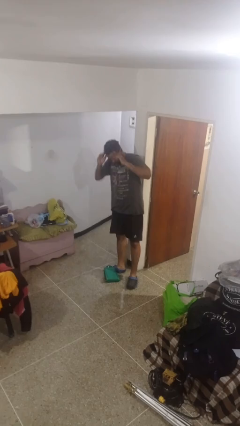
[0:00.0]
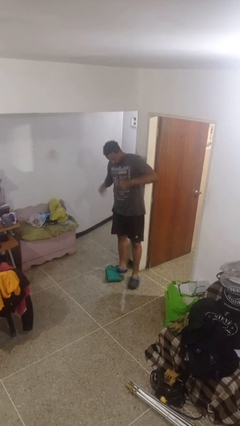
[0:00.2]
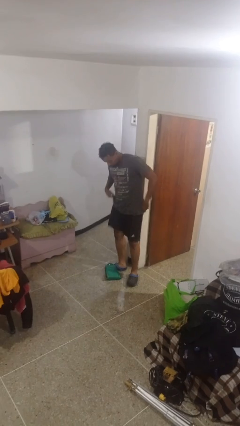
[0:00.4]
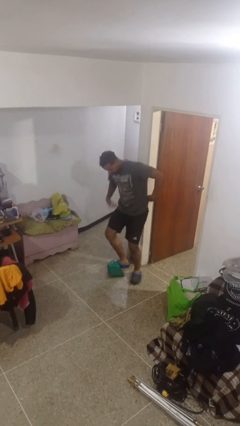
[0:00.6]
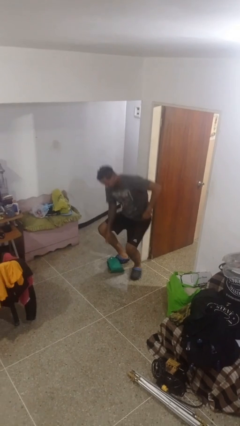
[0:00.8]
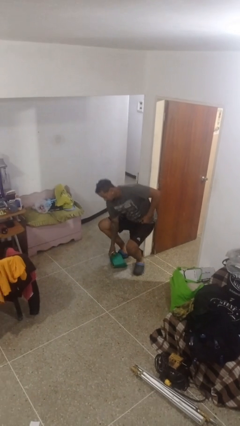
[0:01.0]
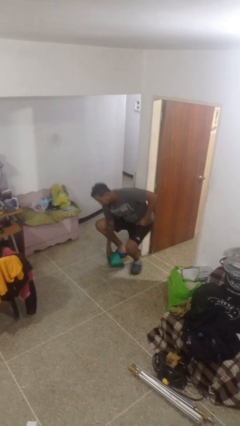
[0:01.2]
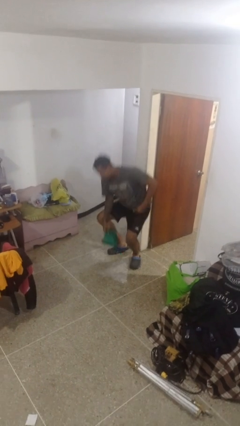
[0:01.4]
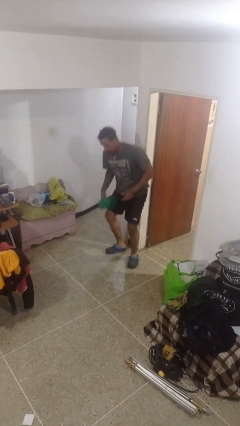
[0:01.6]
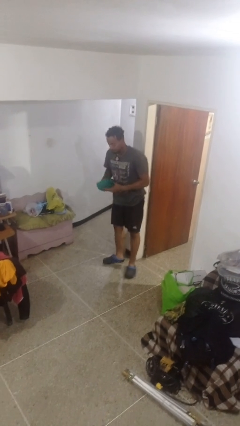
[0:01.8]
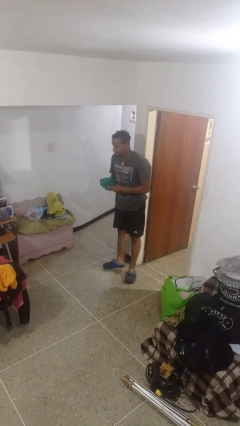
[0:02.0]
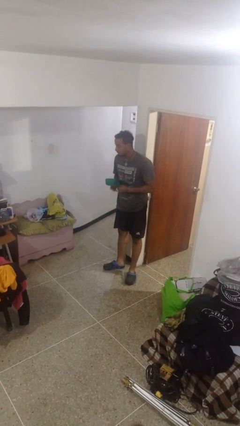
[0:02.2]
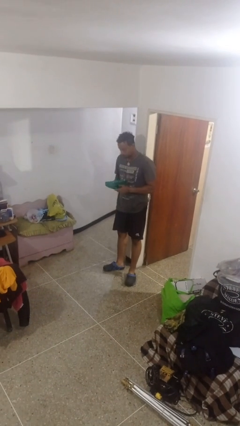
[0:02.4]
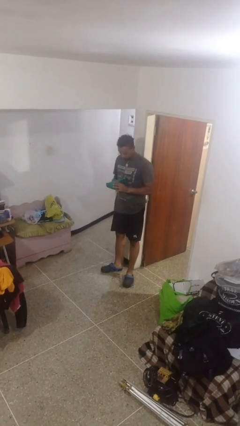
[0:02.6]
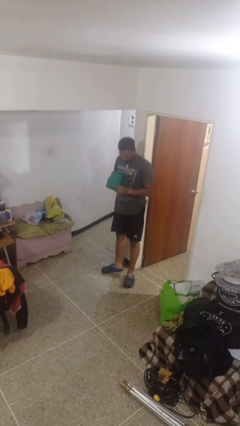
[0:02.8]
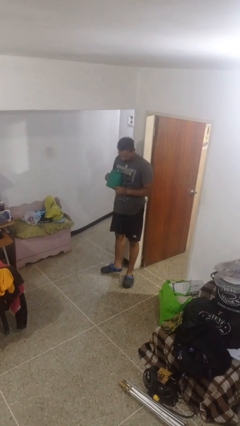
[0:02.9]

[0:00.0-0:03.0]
person picks up object from floor

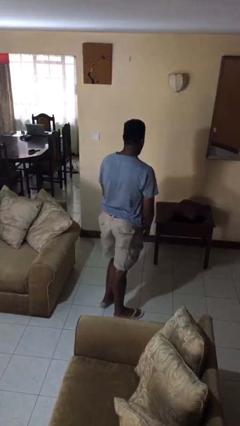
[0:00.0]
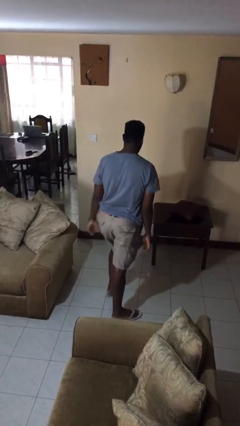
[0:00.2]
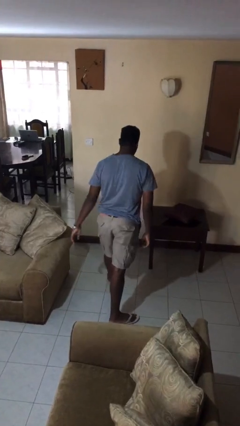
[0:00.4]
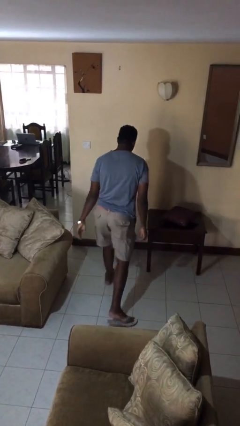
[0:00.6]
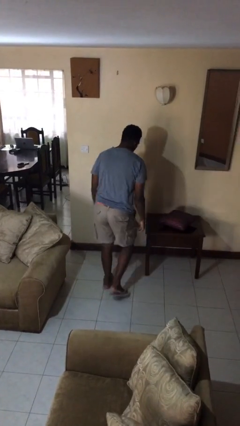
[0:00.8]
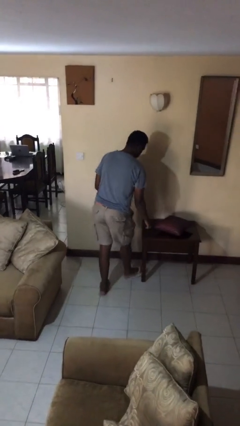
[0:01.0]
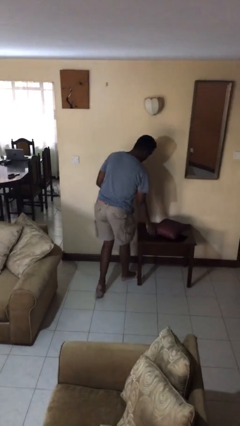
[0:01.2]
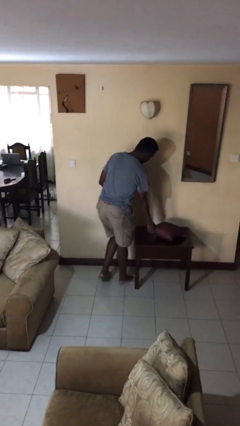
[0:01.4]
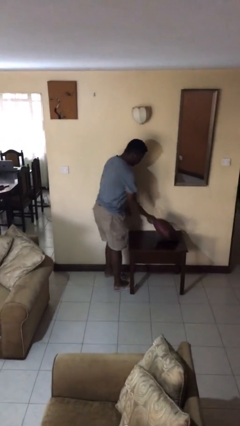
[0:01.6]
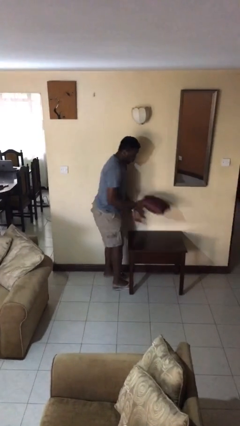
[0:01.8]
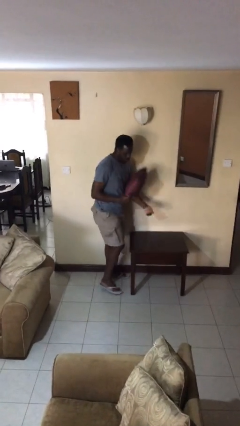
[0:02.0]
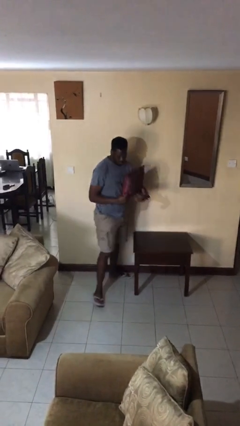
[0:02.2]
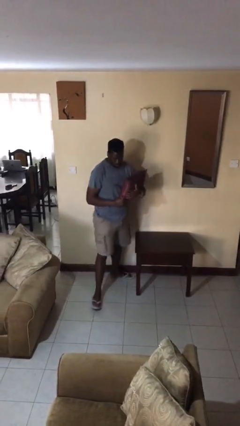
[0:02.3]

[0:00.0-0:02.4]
person picks up object from table

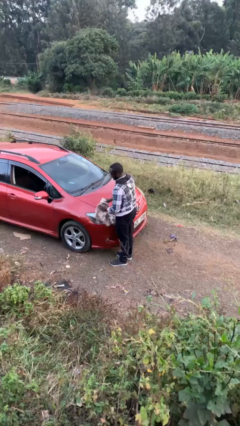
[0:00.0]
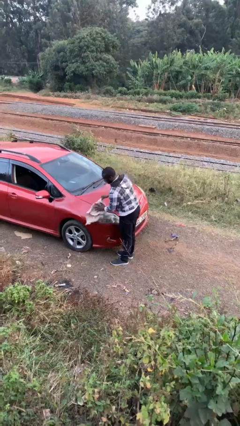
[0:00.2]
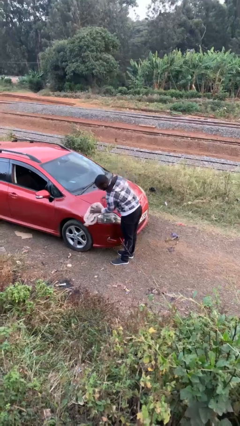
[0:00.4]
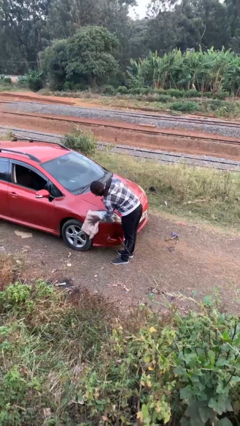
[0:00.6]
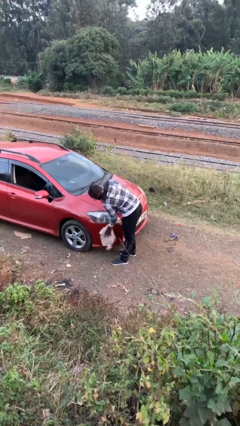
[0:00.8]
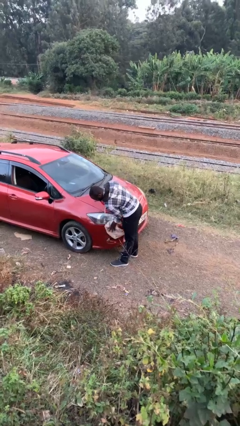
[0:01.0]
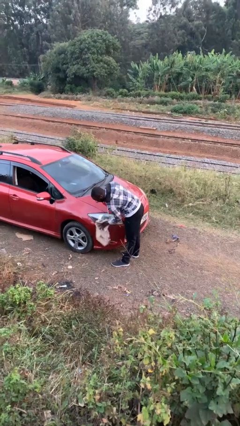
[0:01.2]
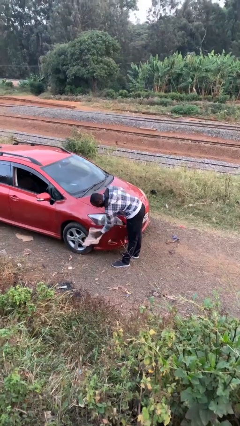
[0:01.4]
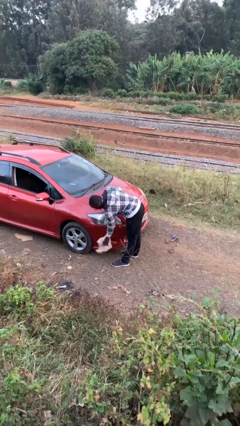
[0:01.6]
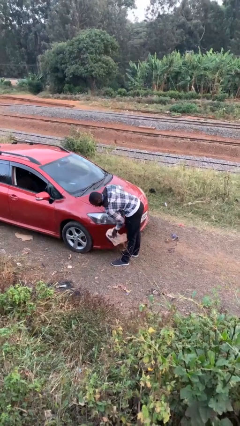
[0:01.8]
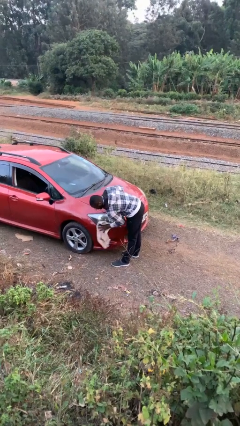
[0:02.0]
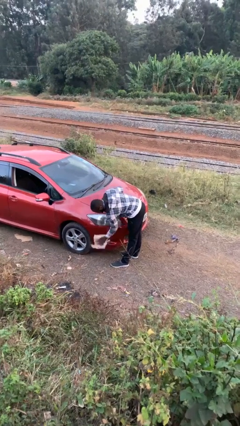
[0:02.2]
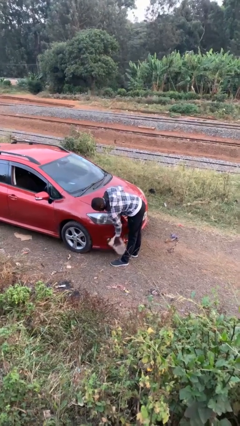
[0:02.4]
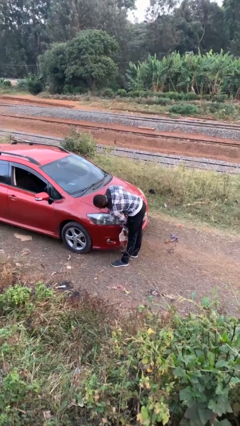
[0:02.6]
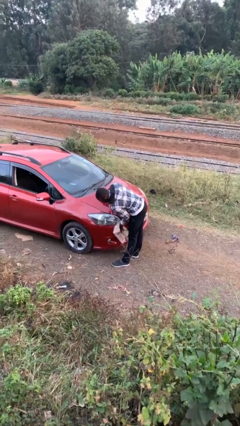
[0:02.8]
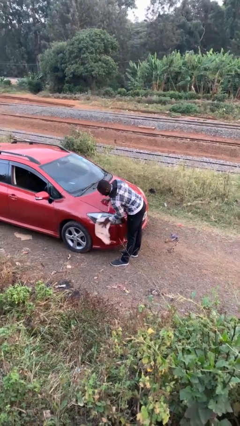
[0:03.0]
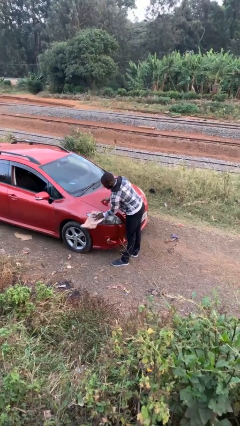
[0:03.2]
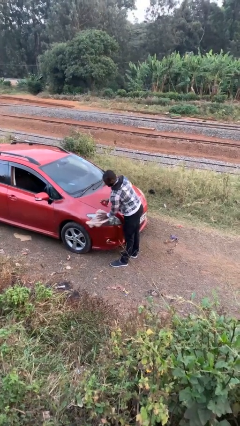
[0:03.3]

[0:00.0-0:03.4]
person polishes car with rag

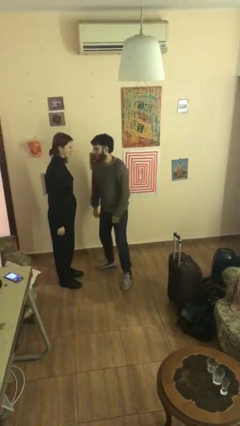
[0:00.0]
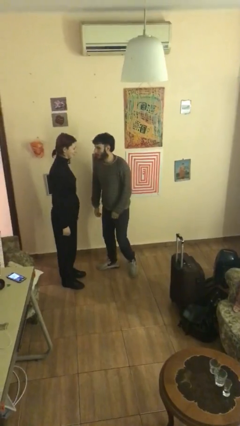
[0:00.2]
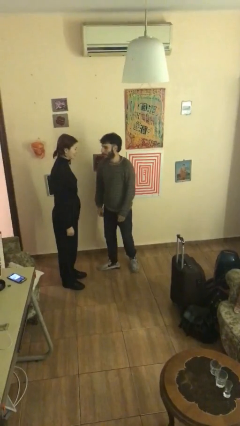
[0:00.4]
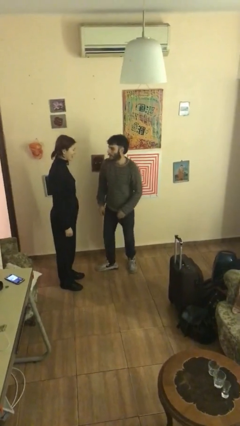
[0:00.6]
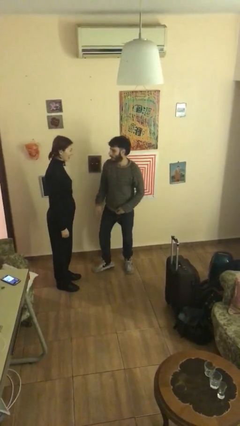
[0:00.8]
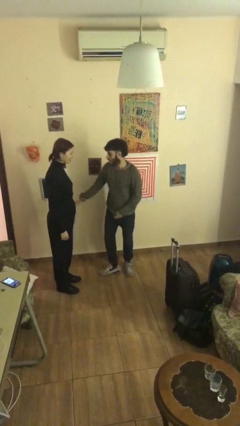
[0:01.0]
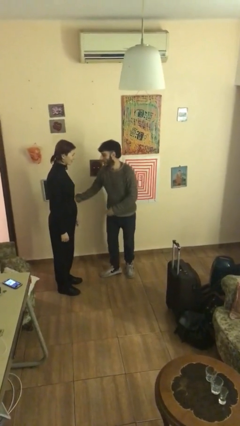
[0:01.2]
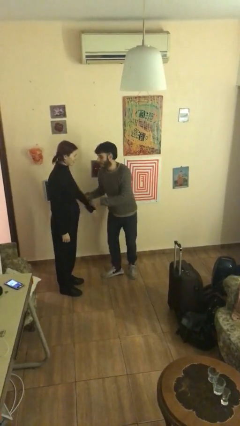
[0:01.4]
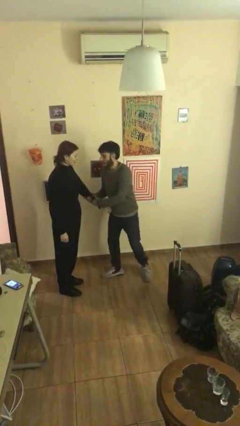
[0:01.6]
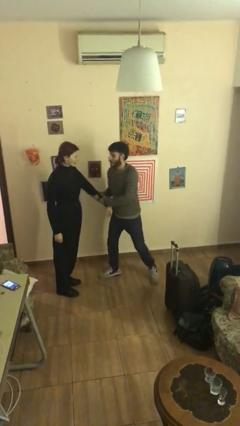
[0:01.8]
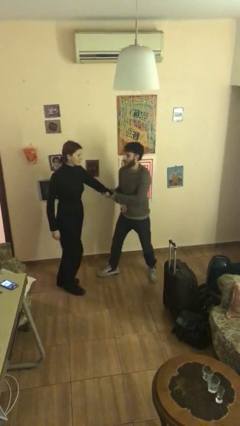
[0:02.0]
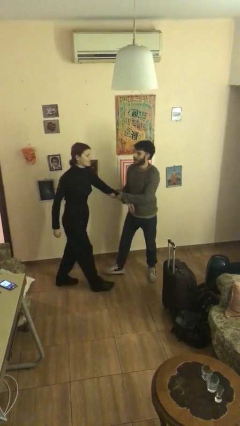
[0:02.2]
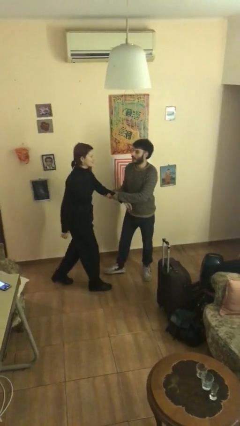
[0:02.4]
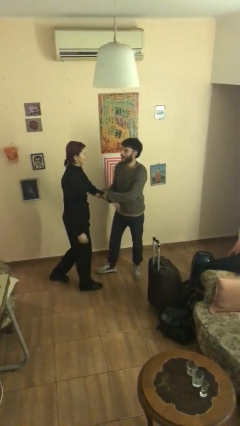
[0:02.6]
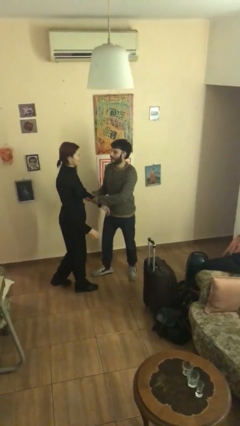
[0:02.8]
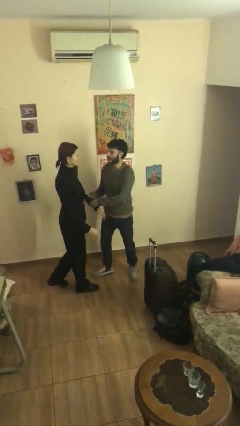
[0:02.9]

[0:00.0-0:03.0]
person grabs person by forearm

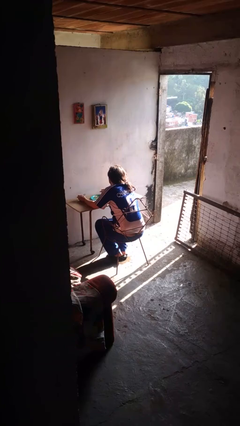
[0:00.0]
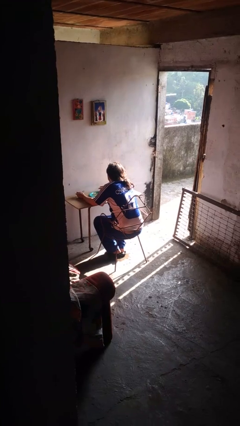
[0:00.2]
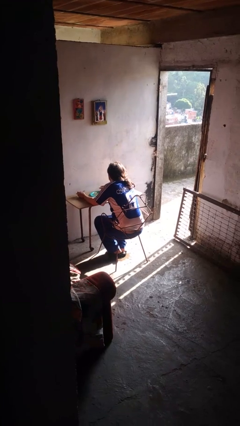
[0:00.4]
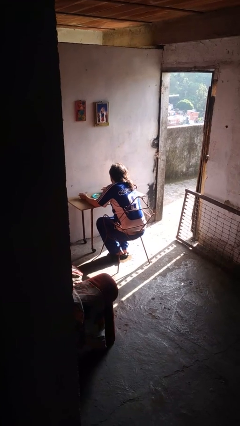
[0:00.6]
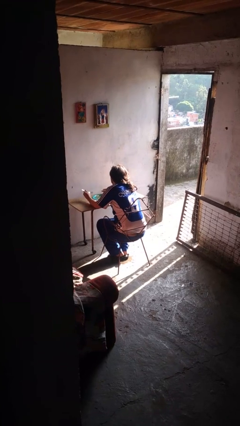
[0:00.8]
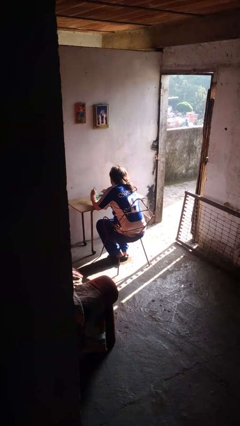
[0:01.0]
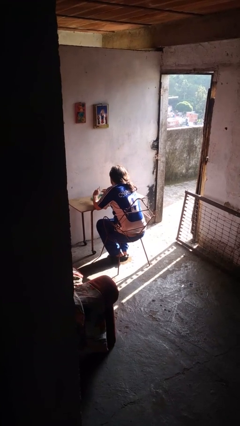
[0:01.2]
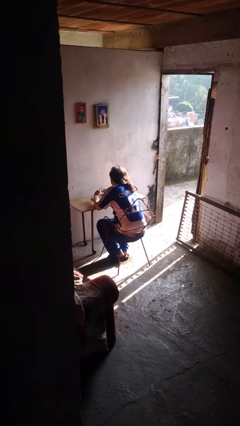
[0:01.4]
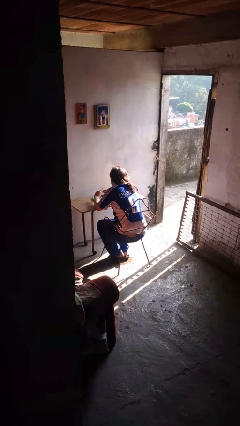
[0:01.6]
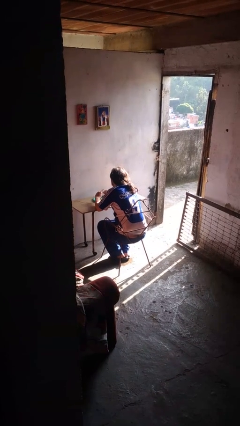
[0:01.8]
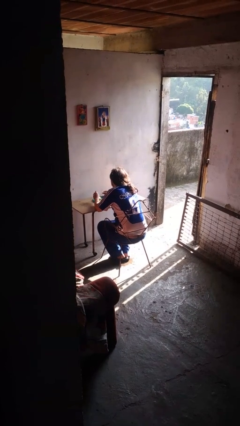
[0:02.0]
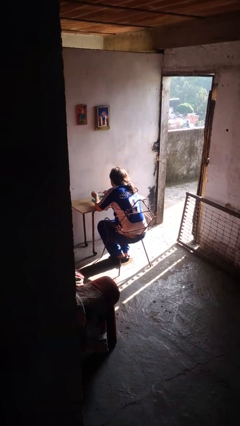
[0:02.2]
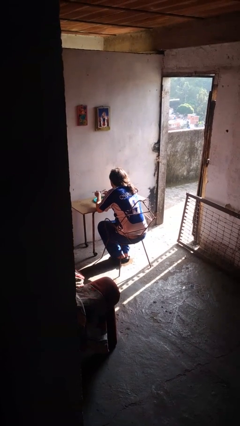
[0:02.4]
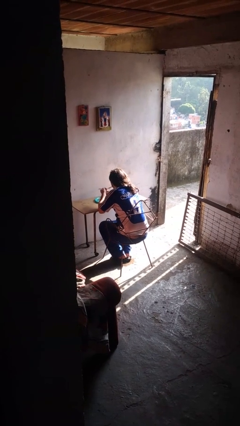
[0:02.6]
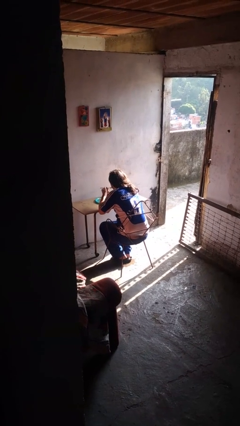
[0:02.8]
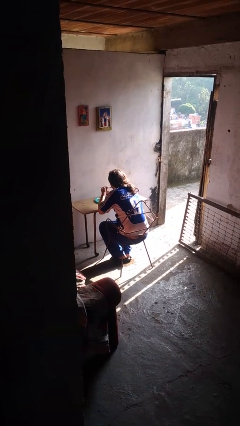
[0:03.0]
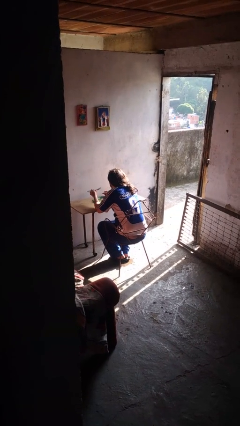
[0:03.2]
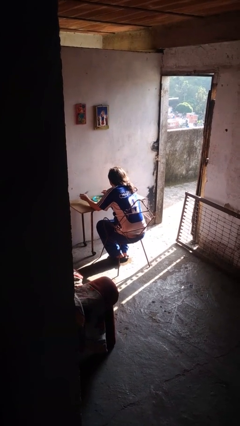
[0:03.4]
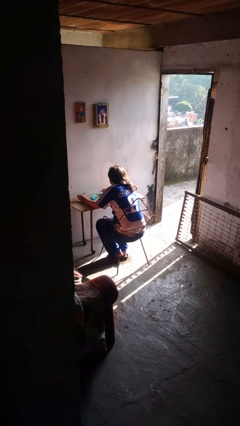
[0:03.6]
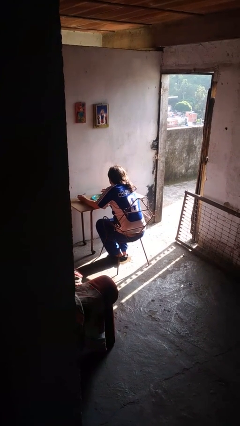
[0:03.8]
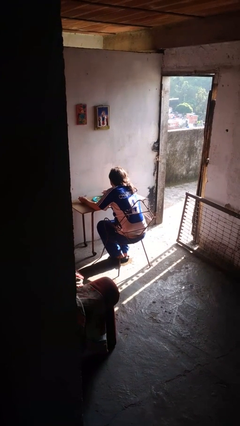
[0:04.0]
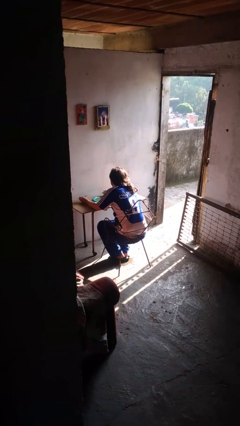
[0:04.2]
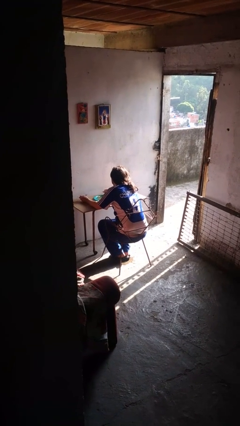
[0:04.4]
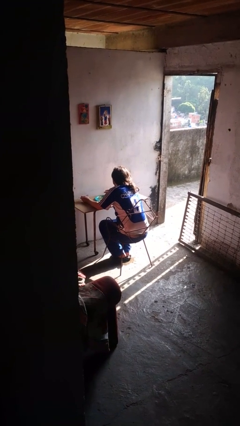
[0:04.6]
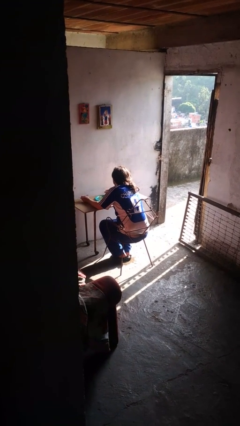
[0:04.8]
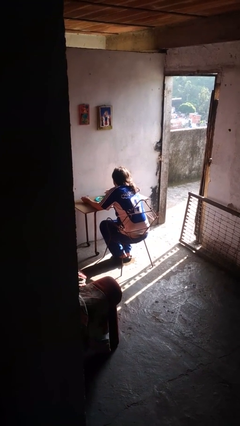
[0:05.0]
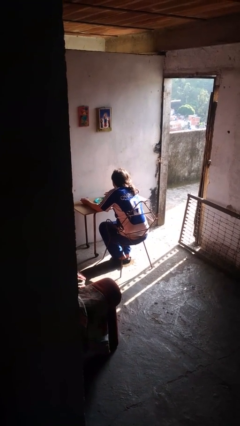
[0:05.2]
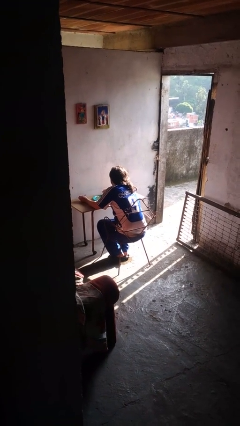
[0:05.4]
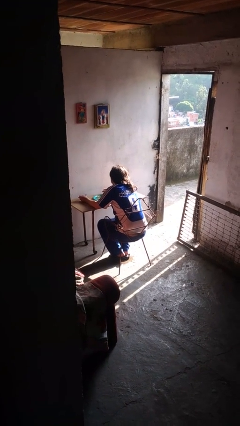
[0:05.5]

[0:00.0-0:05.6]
person eats with utensil

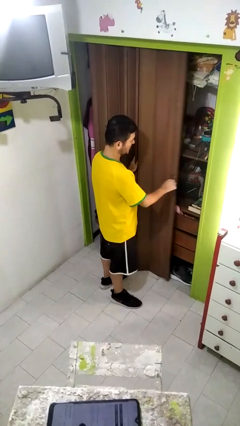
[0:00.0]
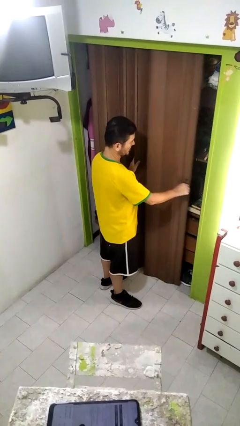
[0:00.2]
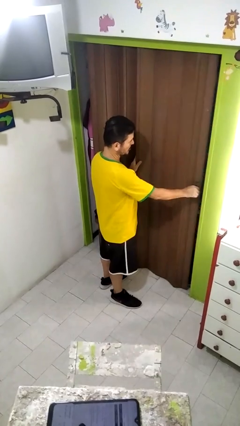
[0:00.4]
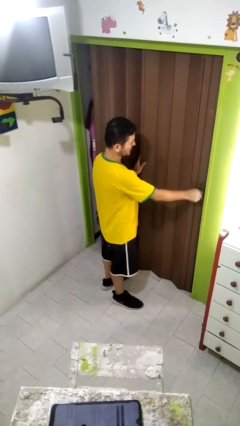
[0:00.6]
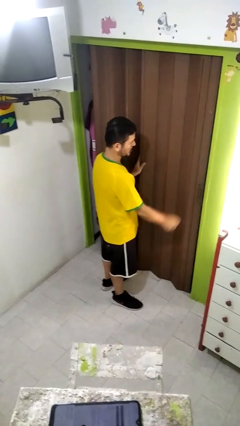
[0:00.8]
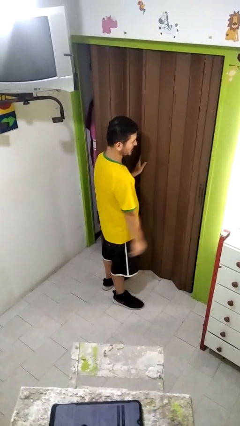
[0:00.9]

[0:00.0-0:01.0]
person closes closet door
